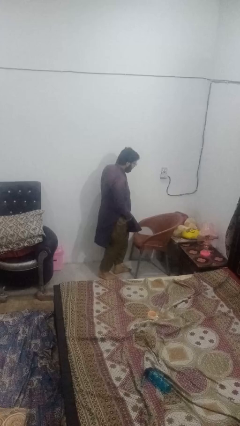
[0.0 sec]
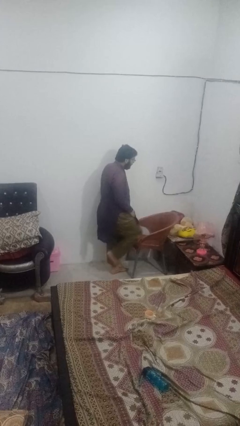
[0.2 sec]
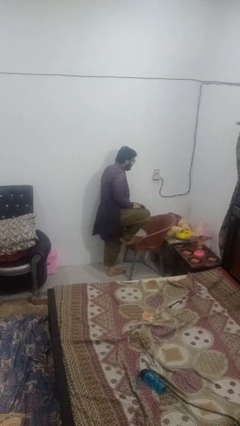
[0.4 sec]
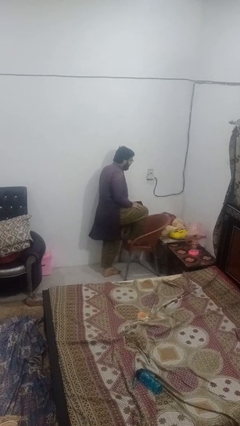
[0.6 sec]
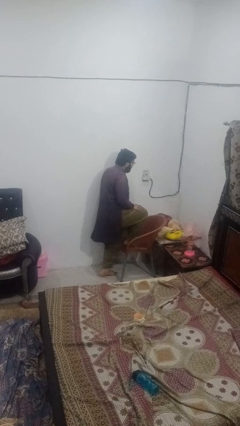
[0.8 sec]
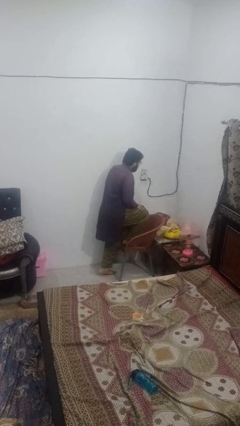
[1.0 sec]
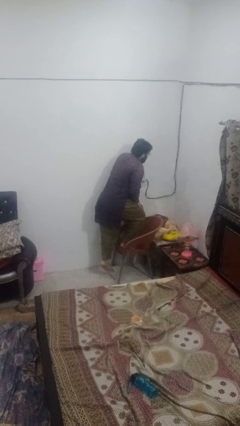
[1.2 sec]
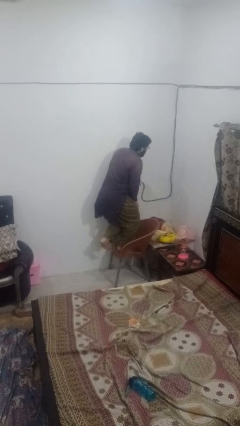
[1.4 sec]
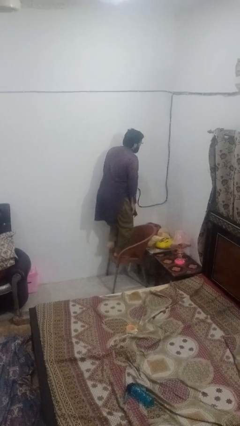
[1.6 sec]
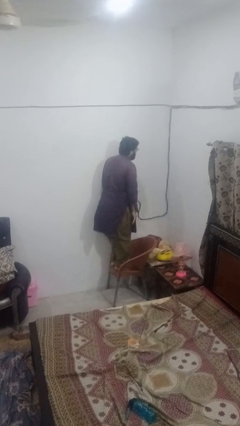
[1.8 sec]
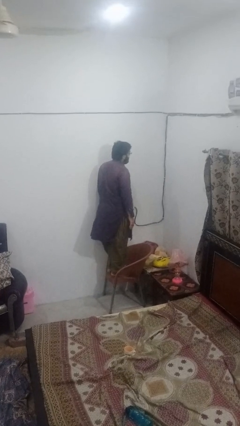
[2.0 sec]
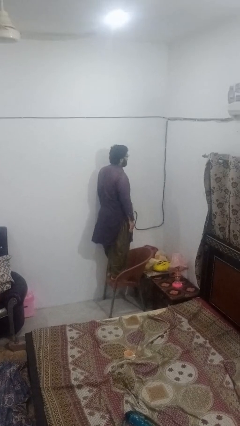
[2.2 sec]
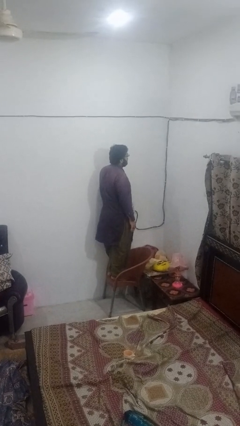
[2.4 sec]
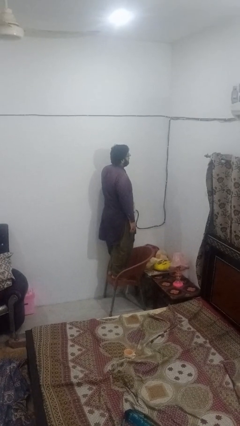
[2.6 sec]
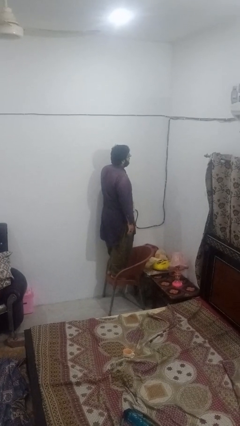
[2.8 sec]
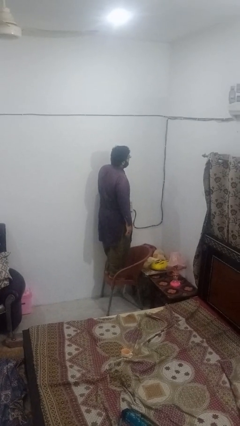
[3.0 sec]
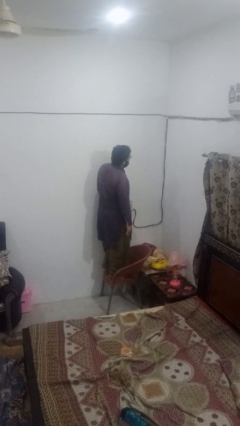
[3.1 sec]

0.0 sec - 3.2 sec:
person climbs on chair

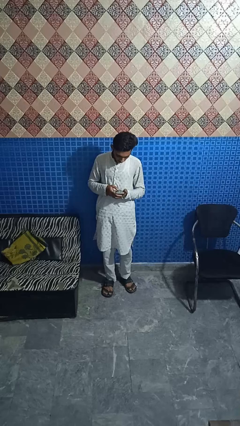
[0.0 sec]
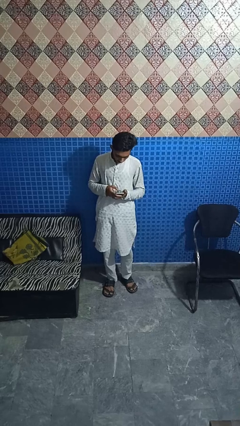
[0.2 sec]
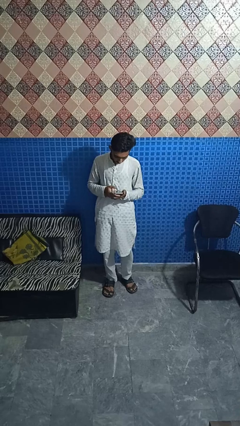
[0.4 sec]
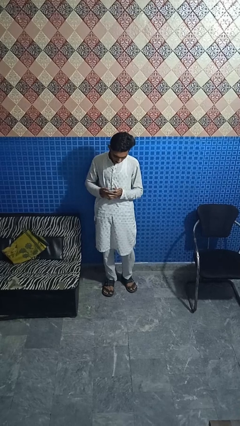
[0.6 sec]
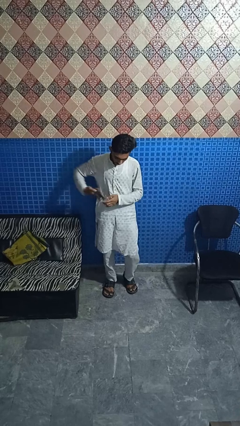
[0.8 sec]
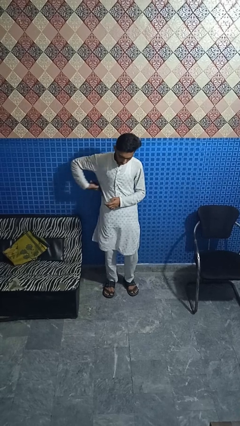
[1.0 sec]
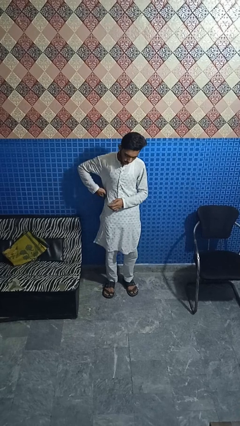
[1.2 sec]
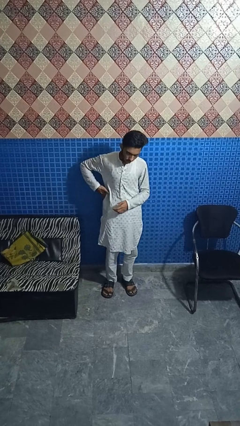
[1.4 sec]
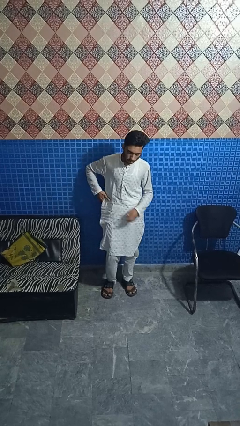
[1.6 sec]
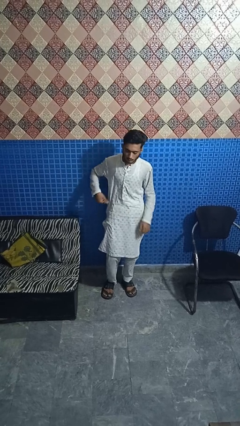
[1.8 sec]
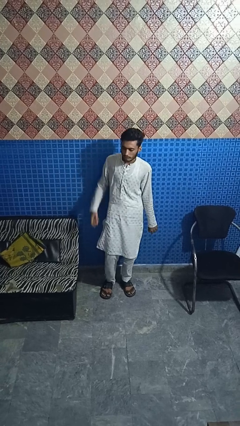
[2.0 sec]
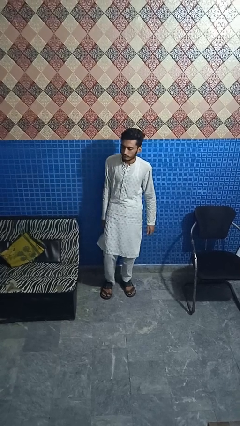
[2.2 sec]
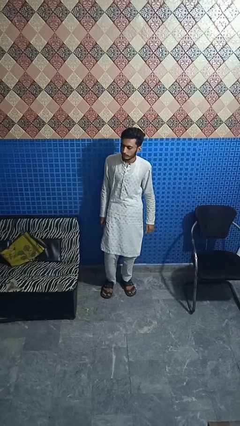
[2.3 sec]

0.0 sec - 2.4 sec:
person puts phone into pocket

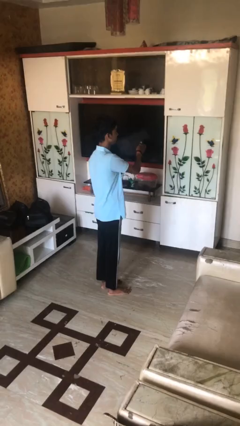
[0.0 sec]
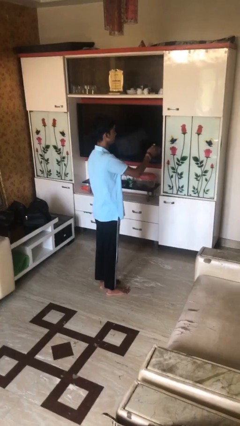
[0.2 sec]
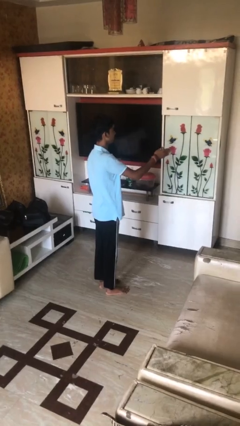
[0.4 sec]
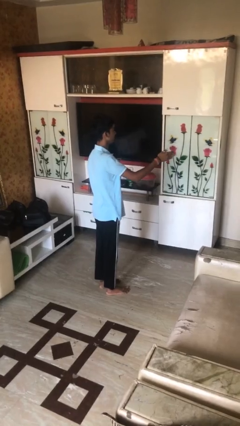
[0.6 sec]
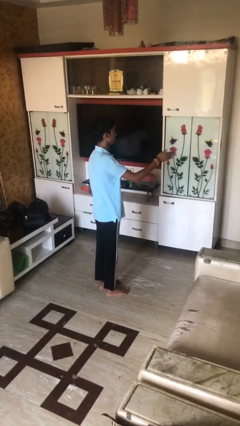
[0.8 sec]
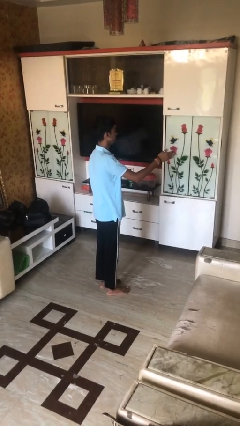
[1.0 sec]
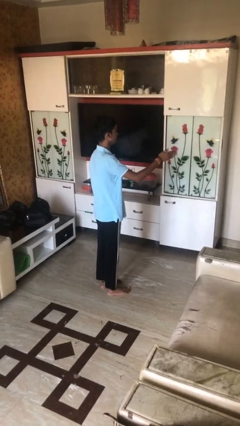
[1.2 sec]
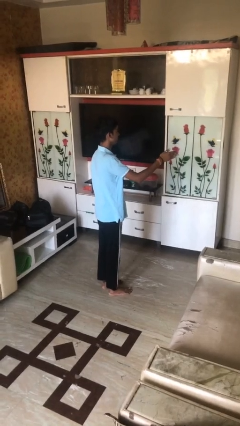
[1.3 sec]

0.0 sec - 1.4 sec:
person gestures swipe right

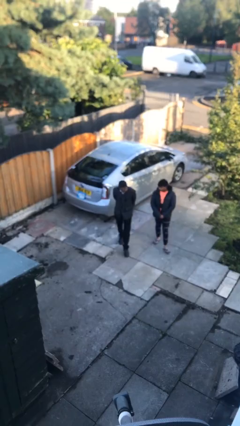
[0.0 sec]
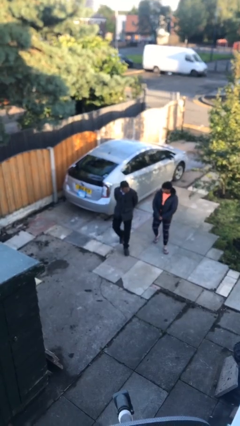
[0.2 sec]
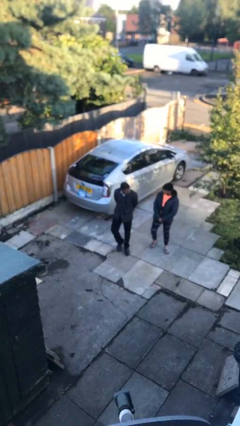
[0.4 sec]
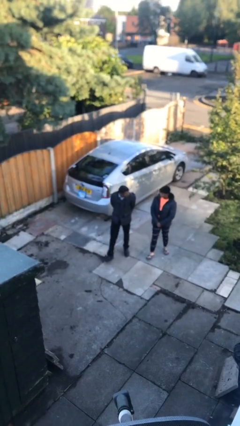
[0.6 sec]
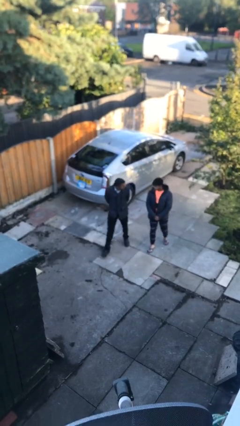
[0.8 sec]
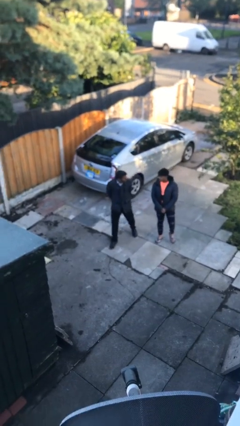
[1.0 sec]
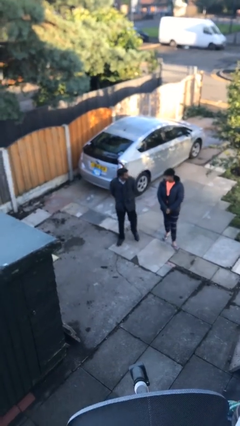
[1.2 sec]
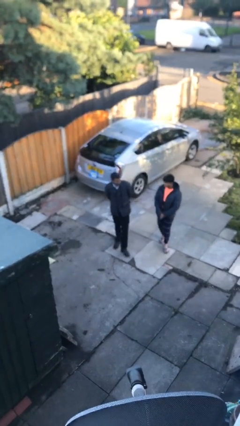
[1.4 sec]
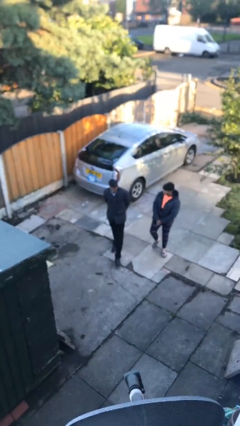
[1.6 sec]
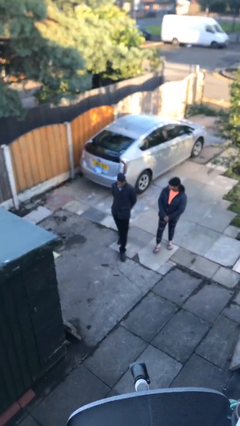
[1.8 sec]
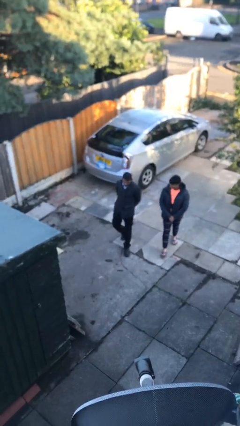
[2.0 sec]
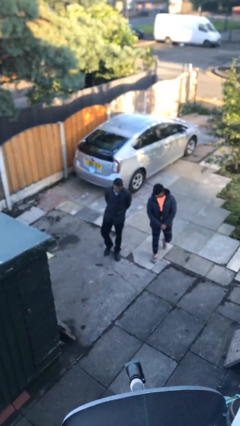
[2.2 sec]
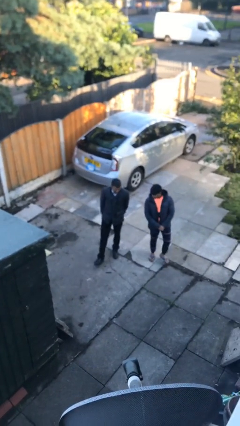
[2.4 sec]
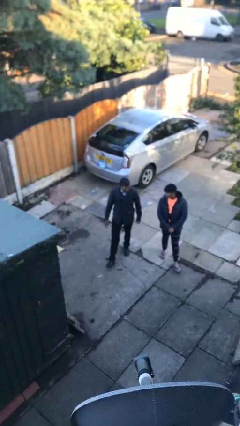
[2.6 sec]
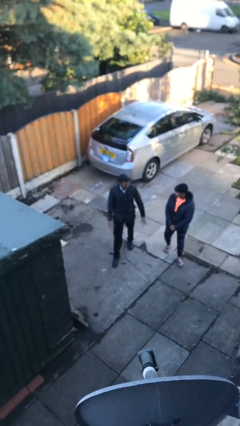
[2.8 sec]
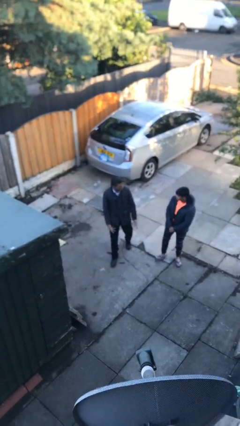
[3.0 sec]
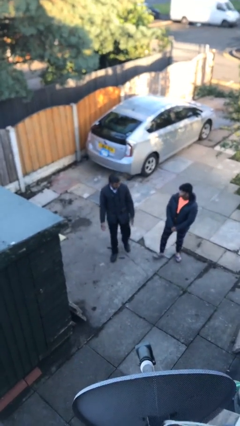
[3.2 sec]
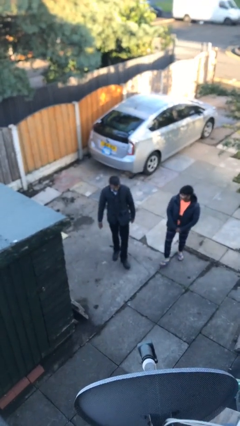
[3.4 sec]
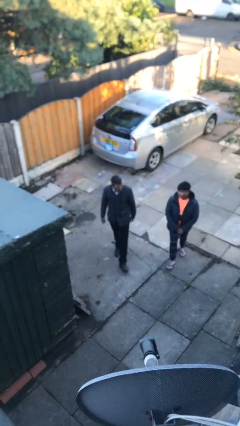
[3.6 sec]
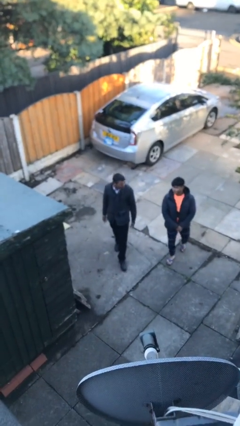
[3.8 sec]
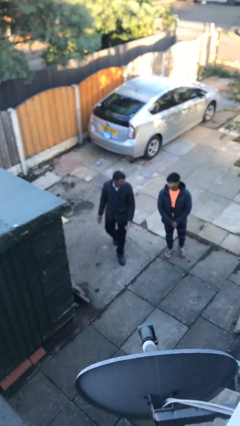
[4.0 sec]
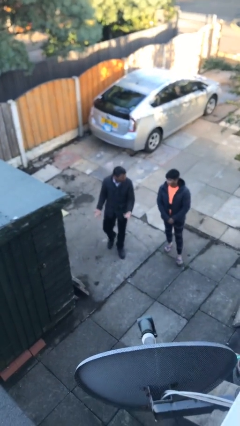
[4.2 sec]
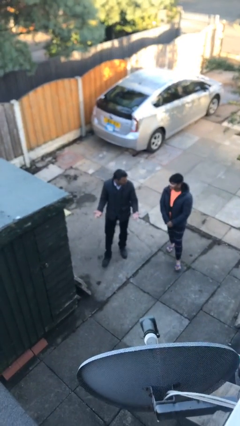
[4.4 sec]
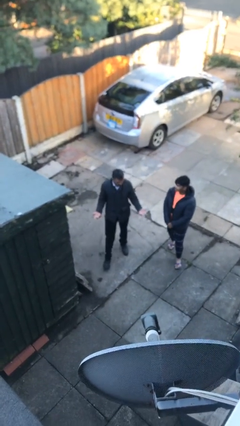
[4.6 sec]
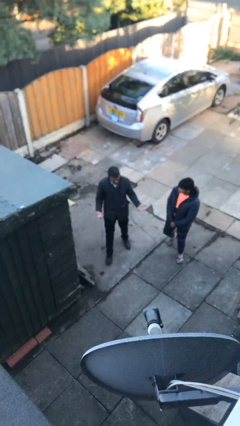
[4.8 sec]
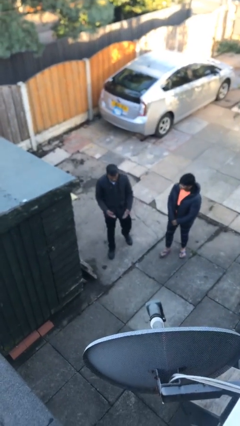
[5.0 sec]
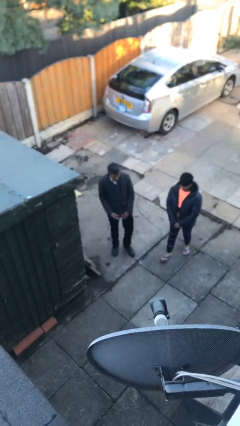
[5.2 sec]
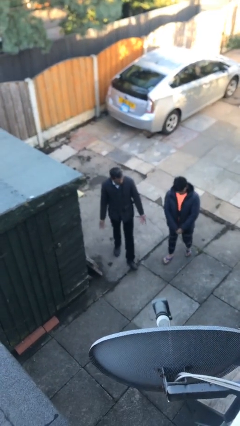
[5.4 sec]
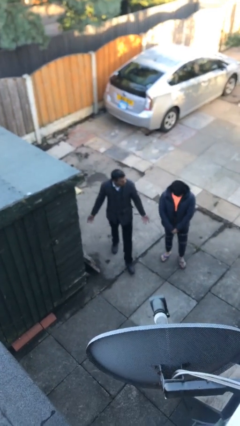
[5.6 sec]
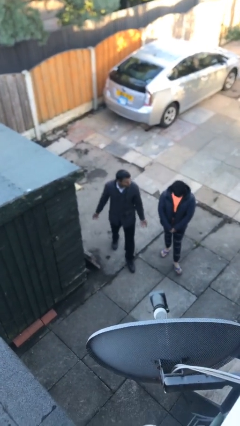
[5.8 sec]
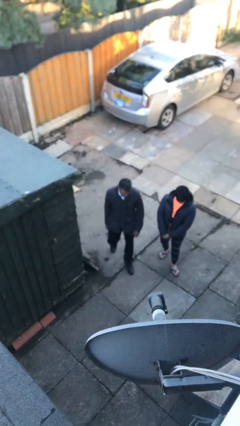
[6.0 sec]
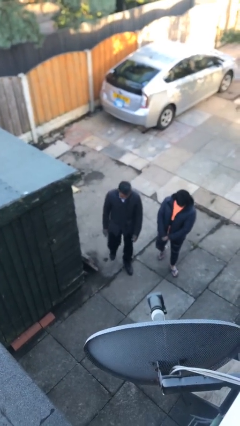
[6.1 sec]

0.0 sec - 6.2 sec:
person talks to person

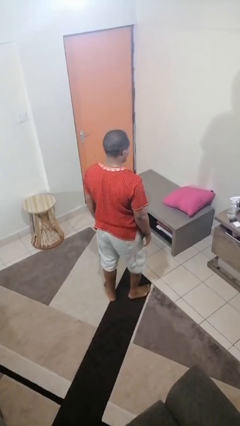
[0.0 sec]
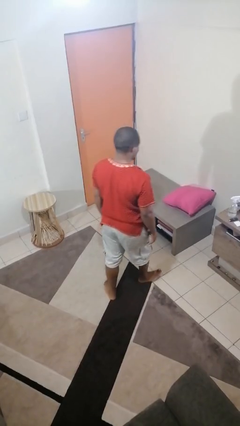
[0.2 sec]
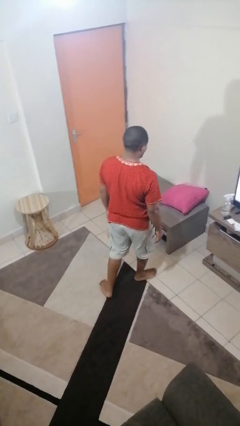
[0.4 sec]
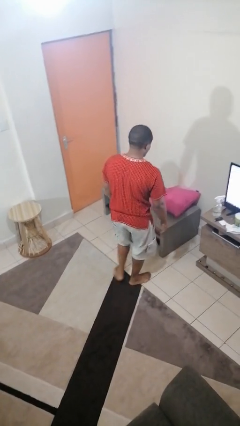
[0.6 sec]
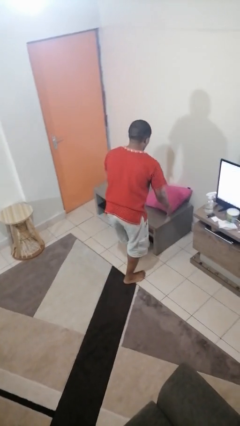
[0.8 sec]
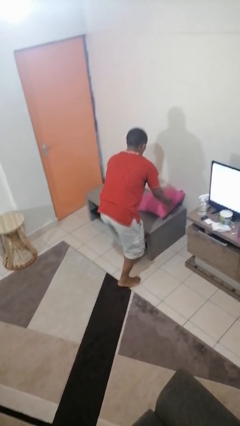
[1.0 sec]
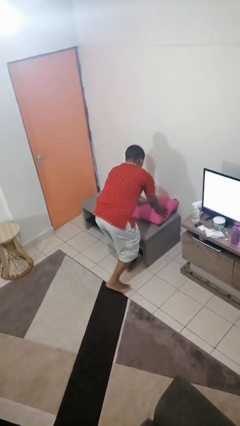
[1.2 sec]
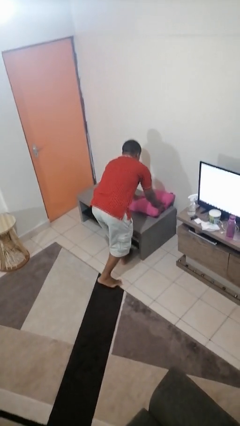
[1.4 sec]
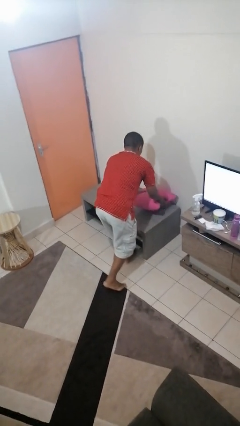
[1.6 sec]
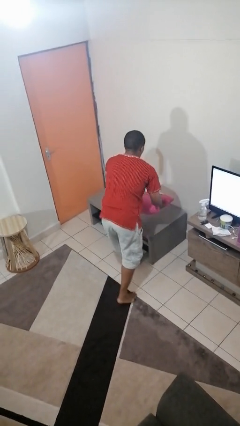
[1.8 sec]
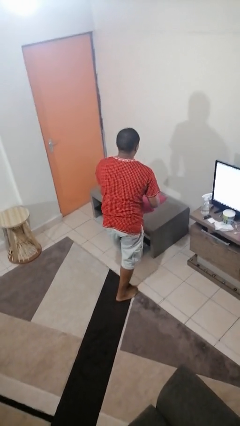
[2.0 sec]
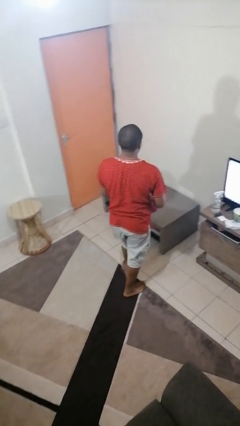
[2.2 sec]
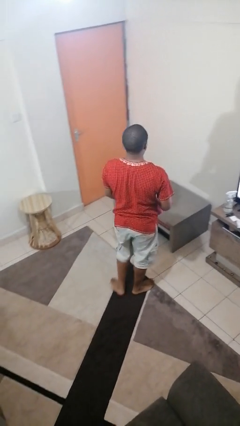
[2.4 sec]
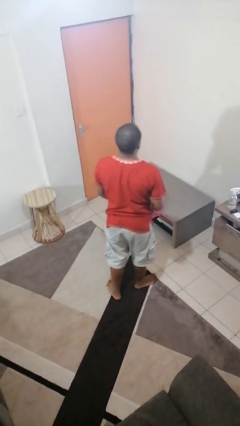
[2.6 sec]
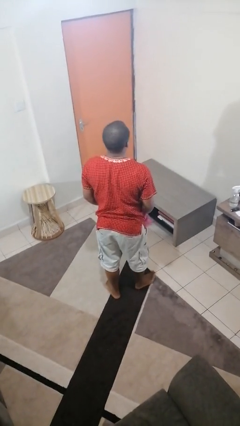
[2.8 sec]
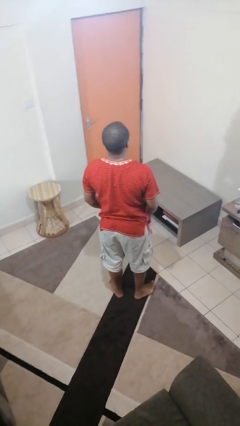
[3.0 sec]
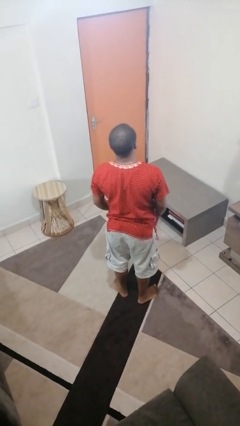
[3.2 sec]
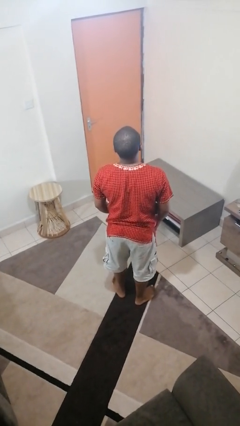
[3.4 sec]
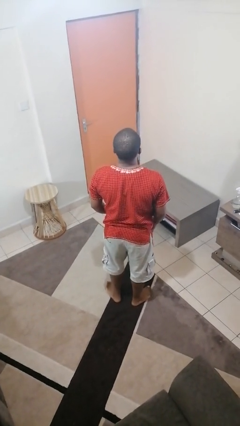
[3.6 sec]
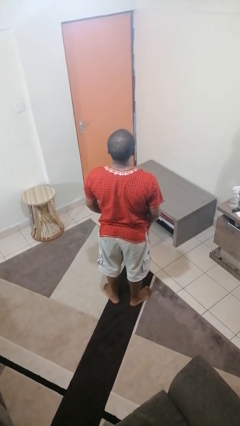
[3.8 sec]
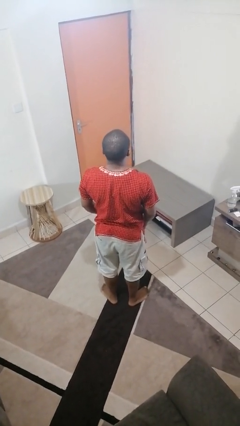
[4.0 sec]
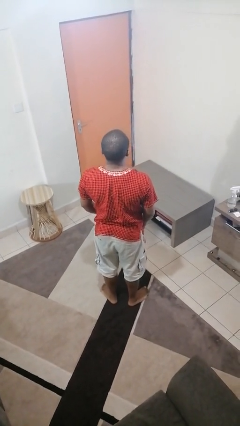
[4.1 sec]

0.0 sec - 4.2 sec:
person picks up object from table
